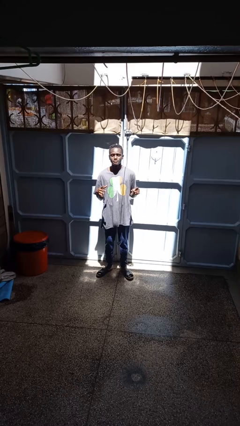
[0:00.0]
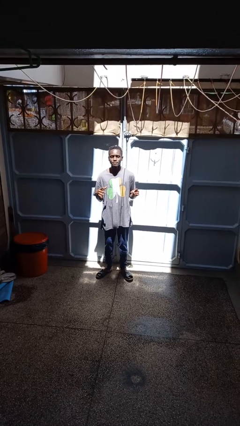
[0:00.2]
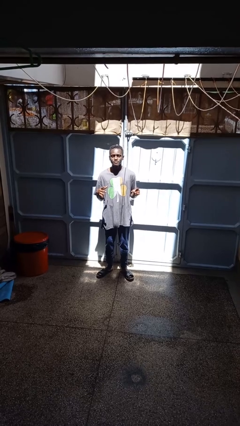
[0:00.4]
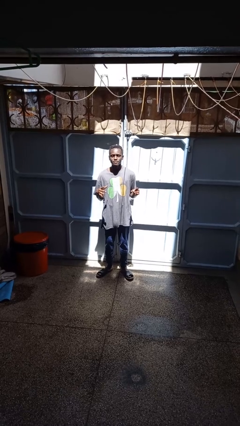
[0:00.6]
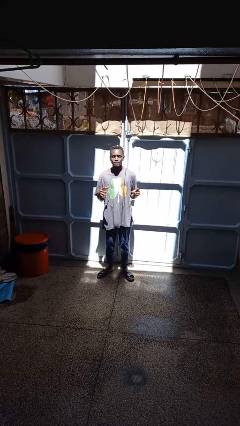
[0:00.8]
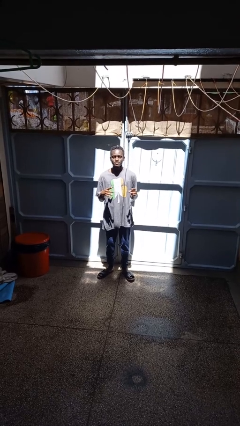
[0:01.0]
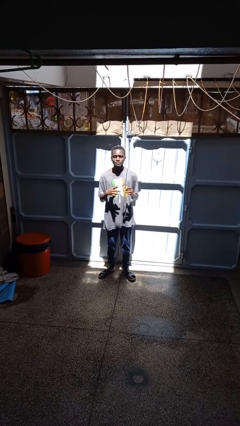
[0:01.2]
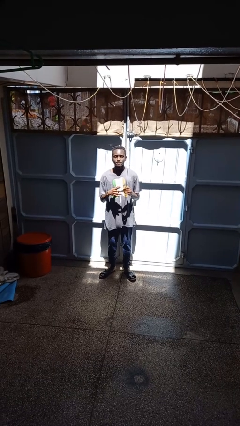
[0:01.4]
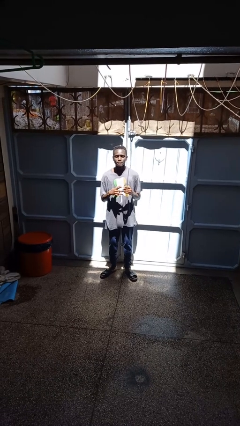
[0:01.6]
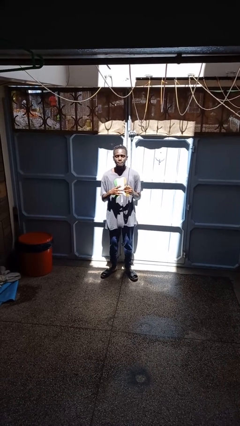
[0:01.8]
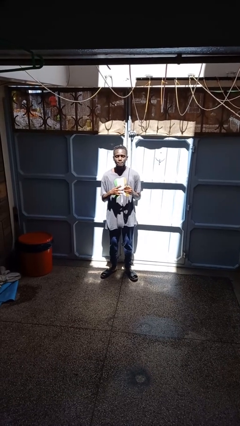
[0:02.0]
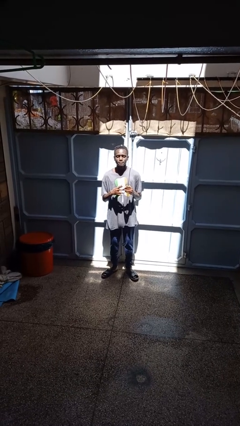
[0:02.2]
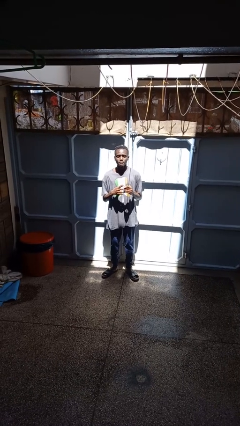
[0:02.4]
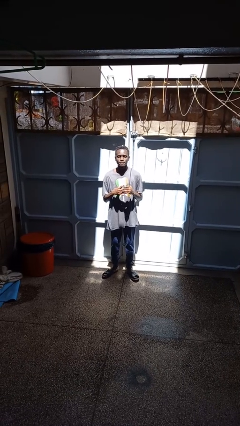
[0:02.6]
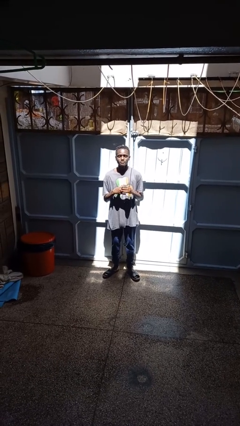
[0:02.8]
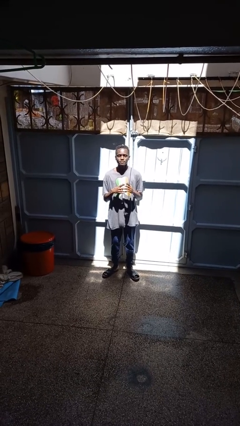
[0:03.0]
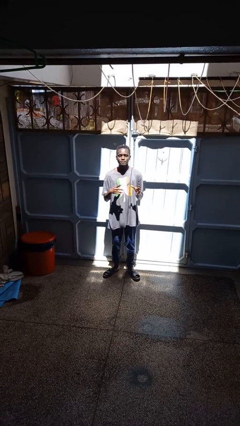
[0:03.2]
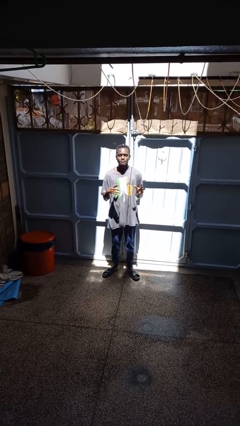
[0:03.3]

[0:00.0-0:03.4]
person puts on ring

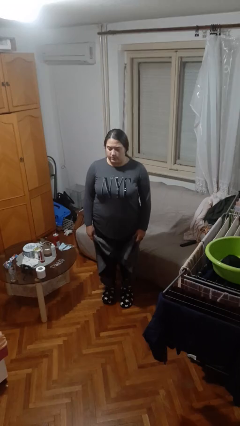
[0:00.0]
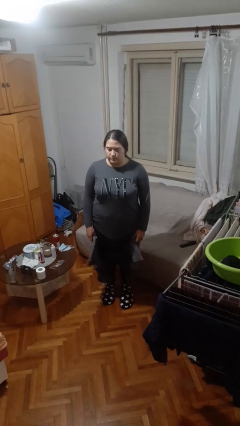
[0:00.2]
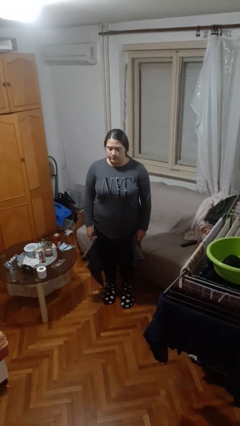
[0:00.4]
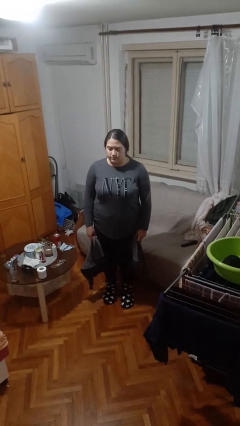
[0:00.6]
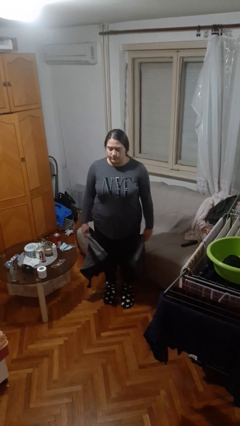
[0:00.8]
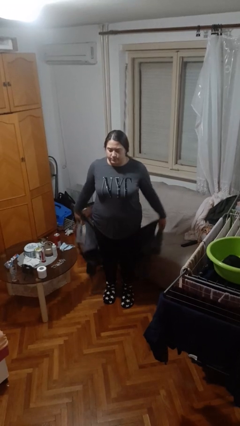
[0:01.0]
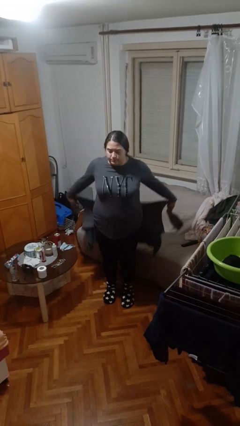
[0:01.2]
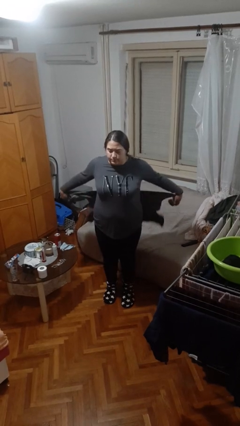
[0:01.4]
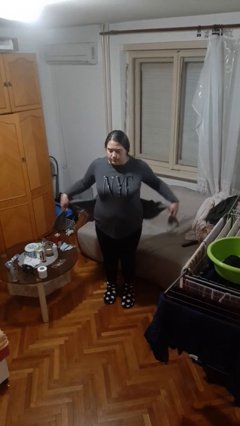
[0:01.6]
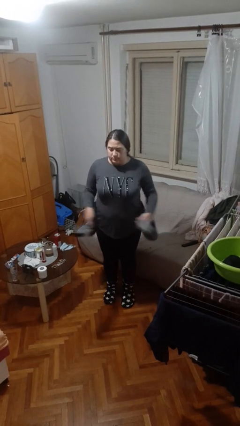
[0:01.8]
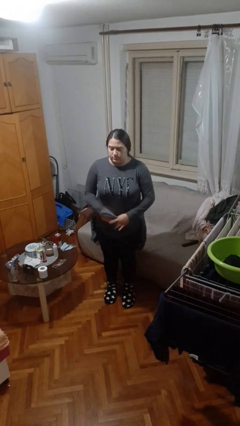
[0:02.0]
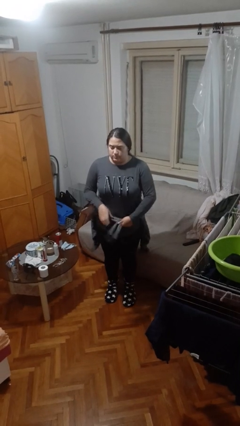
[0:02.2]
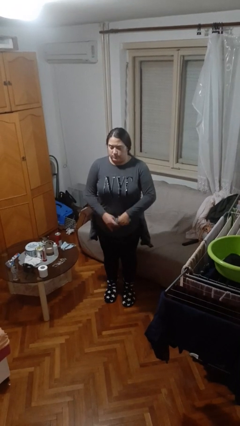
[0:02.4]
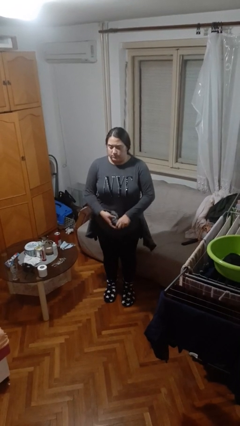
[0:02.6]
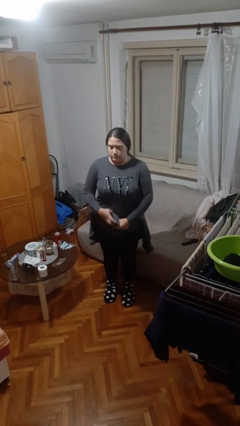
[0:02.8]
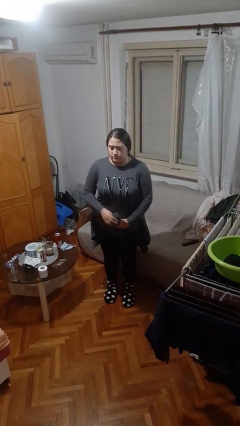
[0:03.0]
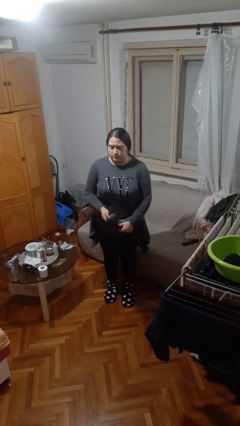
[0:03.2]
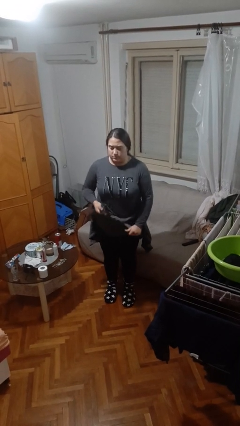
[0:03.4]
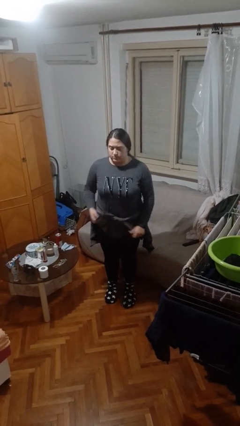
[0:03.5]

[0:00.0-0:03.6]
person ties jacket around waist

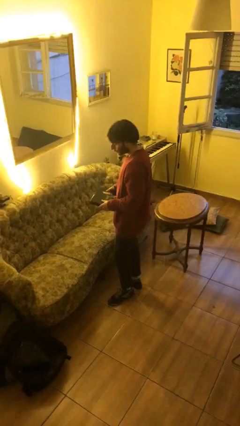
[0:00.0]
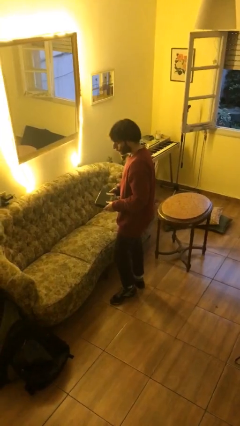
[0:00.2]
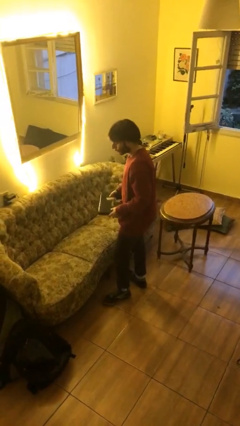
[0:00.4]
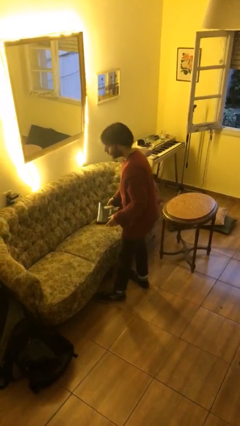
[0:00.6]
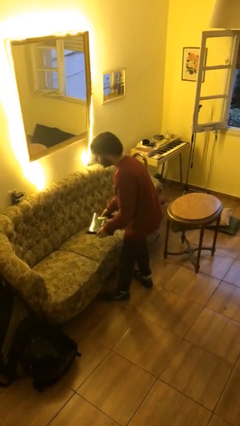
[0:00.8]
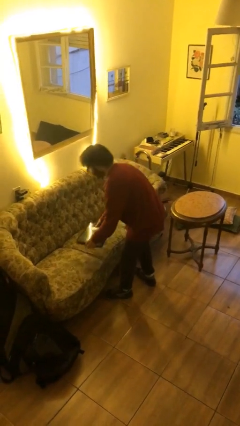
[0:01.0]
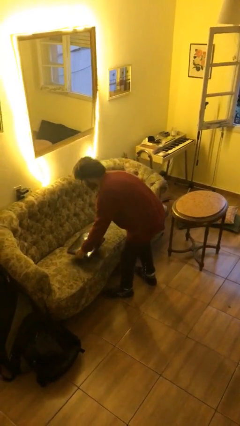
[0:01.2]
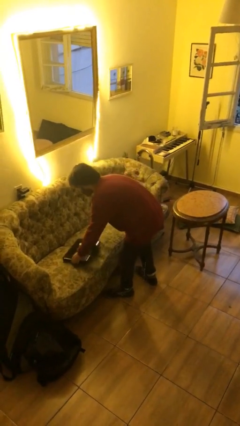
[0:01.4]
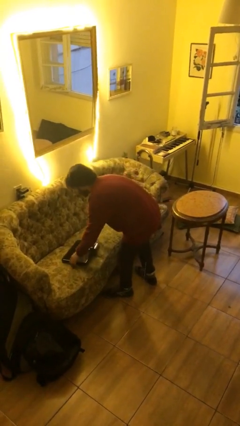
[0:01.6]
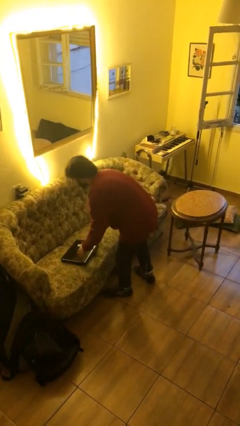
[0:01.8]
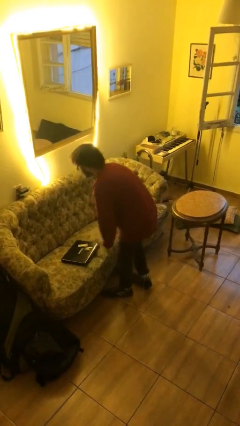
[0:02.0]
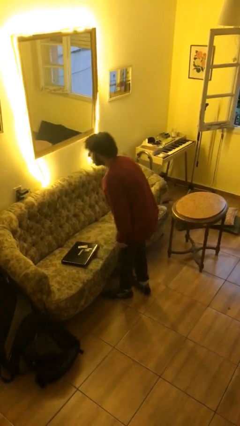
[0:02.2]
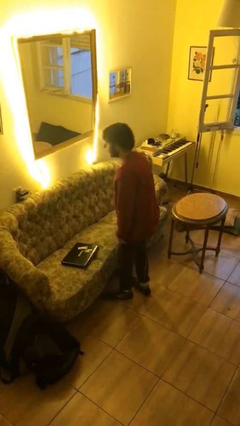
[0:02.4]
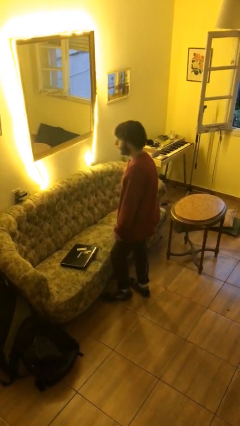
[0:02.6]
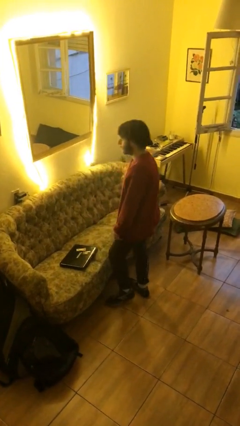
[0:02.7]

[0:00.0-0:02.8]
person puts down object on couch

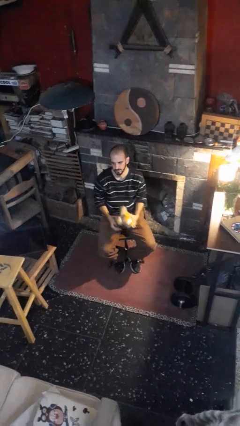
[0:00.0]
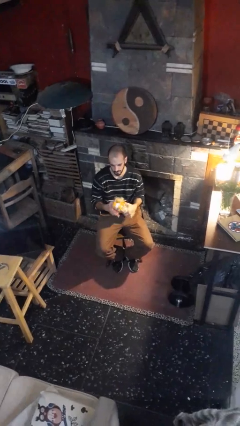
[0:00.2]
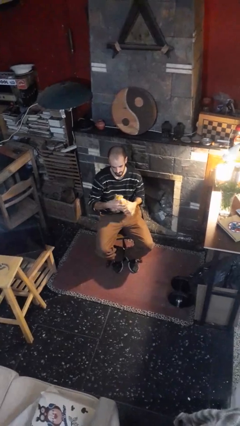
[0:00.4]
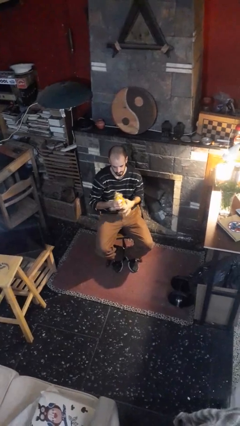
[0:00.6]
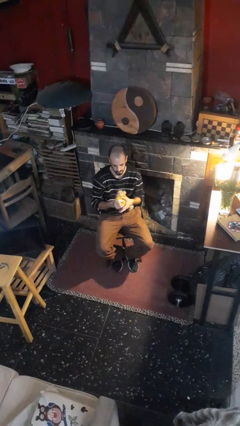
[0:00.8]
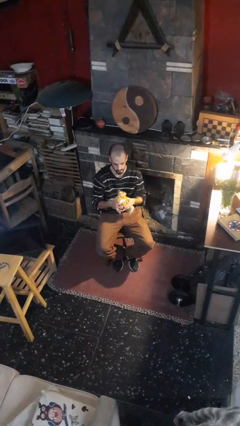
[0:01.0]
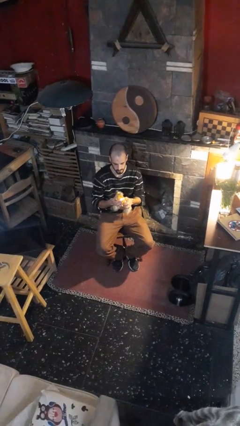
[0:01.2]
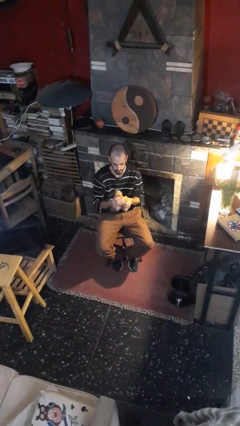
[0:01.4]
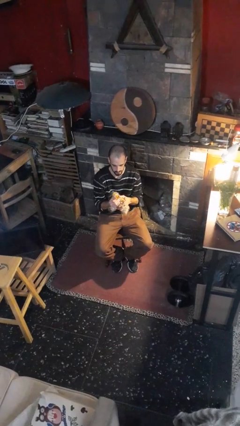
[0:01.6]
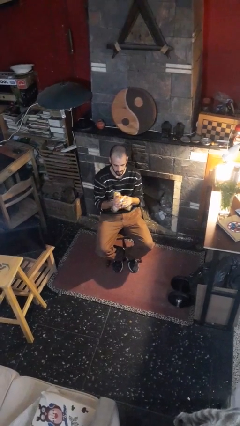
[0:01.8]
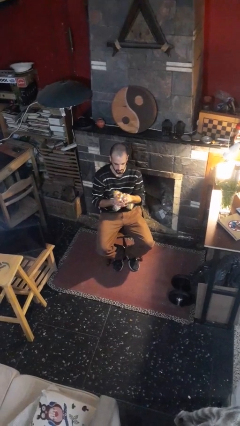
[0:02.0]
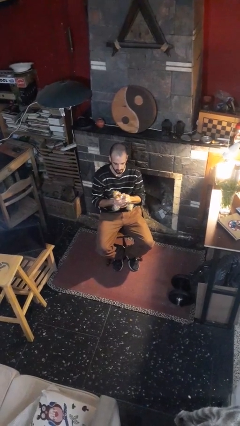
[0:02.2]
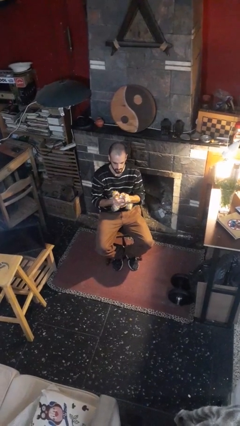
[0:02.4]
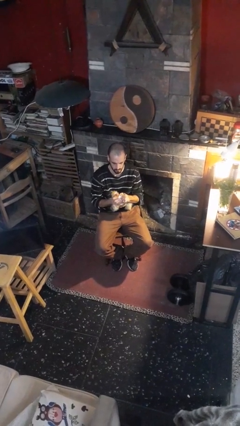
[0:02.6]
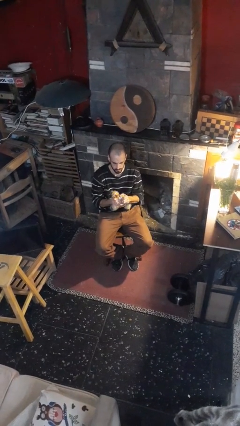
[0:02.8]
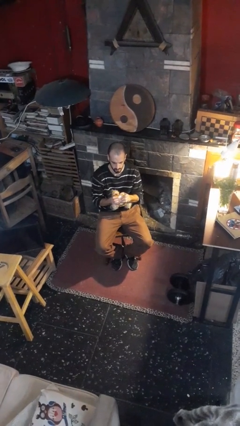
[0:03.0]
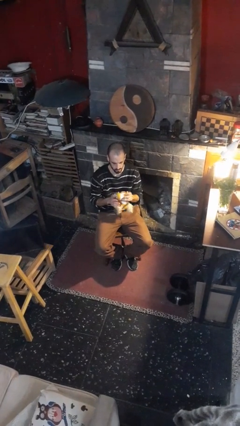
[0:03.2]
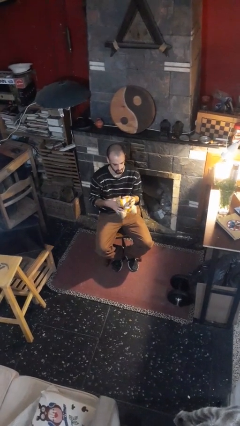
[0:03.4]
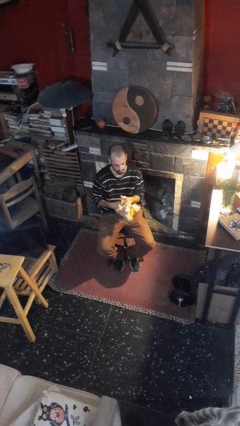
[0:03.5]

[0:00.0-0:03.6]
person squeezes object

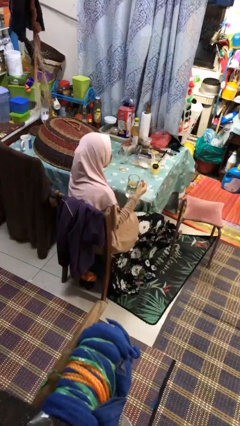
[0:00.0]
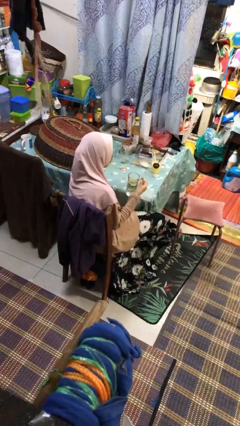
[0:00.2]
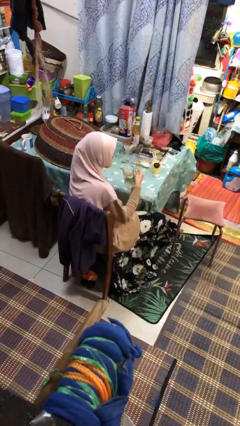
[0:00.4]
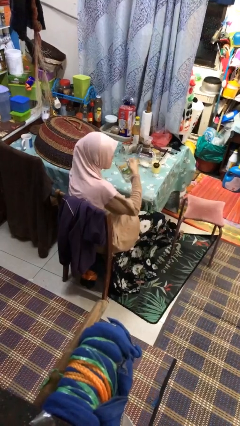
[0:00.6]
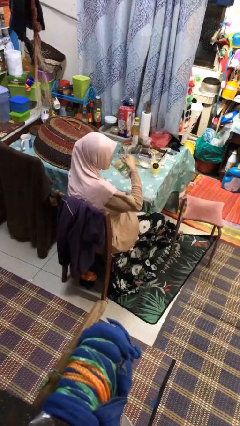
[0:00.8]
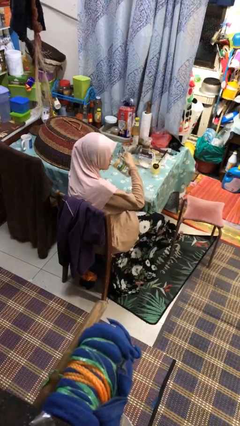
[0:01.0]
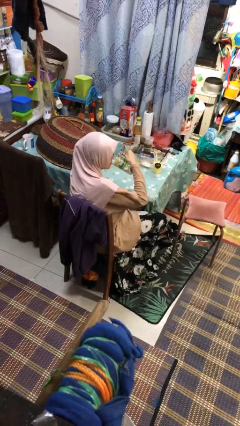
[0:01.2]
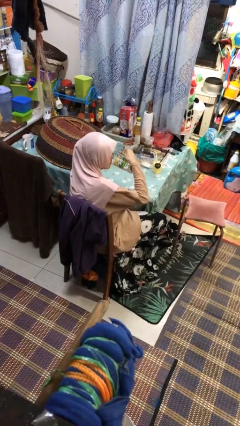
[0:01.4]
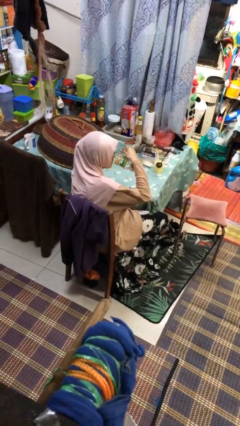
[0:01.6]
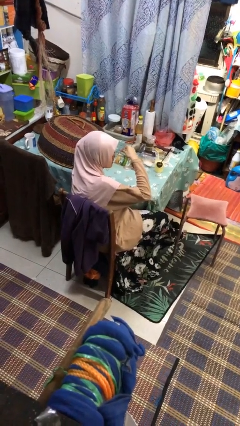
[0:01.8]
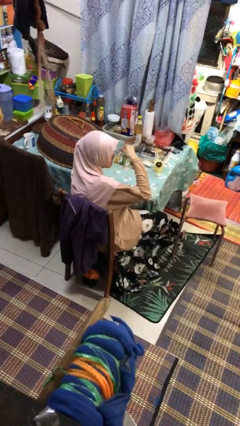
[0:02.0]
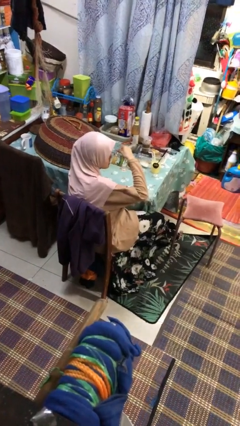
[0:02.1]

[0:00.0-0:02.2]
person drinks from mug

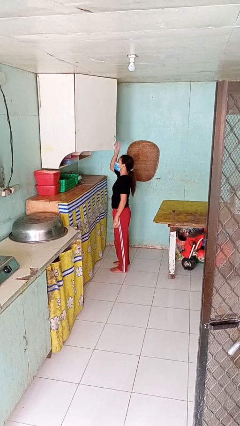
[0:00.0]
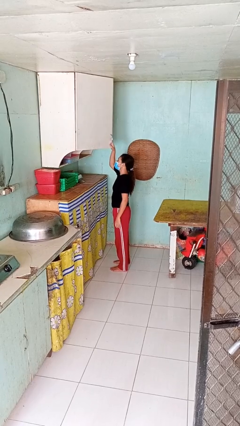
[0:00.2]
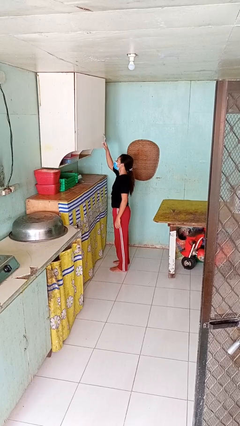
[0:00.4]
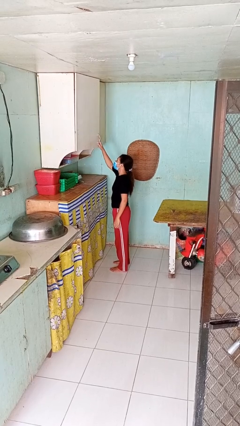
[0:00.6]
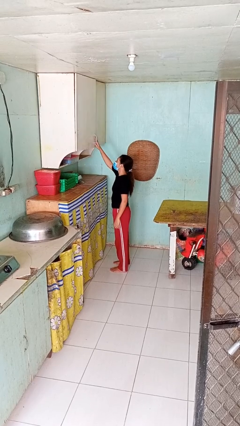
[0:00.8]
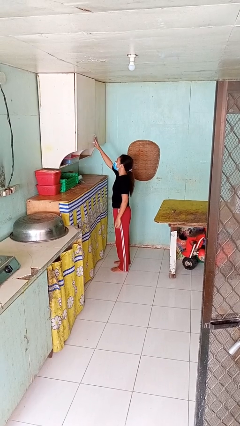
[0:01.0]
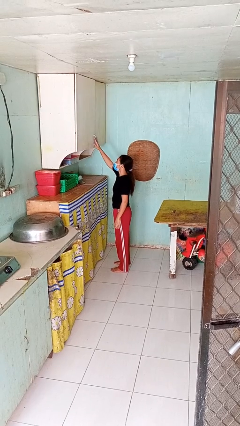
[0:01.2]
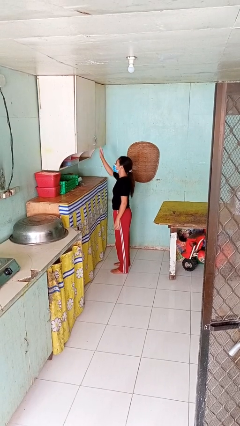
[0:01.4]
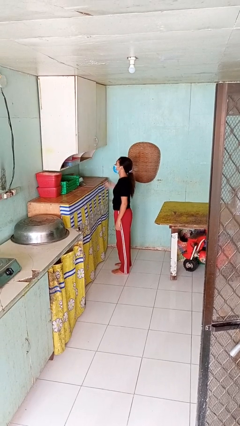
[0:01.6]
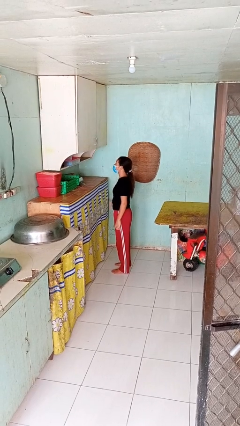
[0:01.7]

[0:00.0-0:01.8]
person closes cabinet

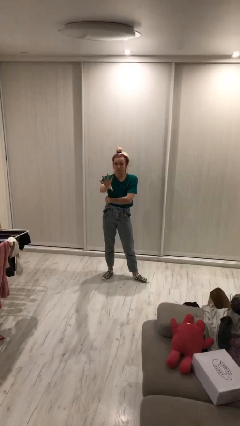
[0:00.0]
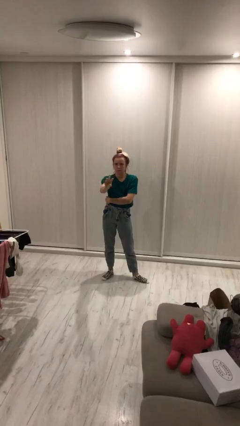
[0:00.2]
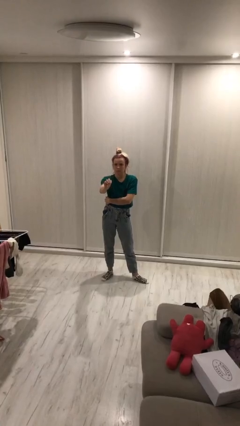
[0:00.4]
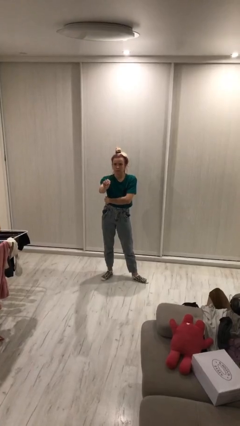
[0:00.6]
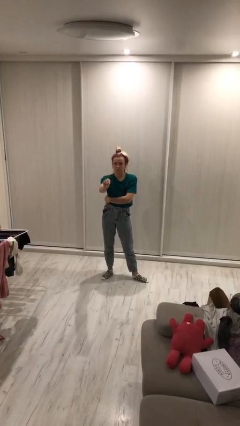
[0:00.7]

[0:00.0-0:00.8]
person gestures zoom out
